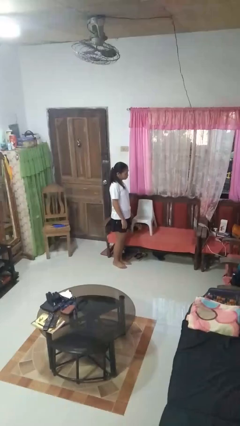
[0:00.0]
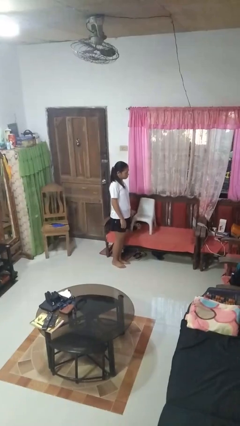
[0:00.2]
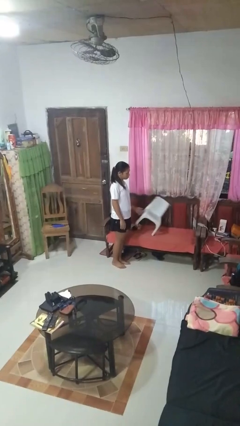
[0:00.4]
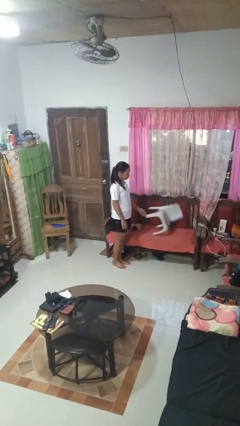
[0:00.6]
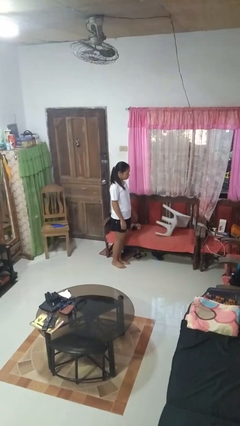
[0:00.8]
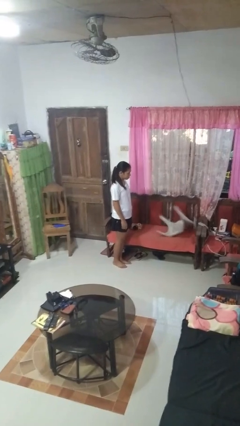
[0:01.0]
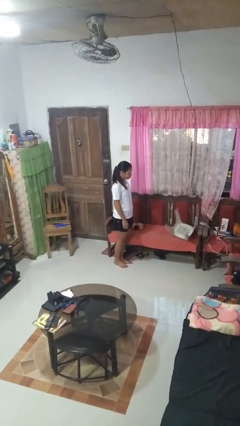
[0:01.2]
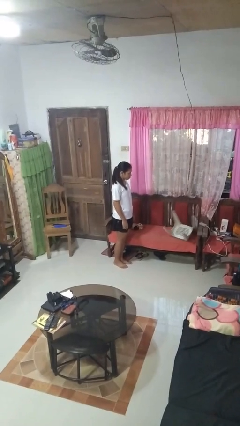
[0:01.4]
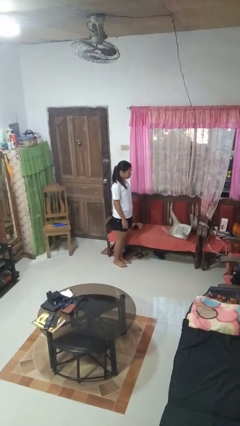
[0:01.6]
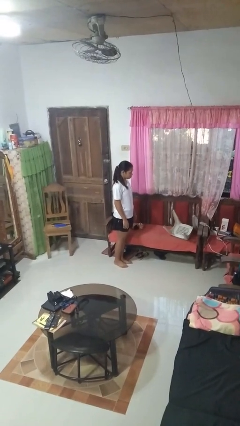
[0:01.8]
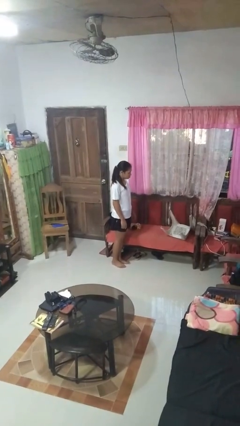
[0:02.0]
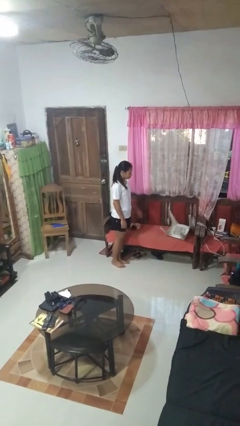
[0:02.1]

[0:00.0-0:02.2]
person knocks over furniture

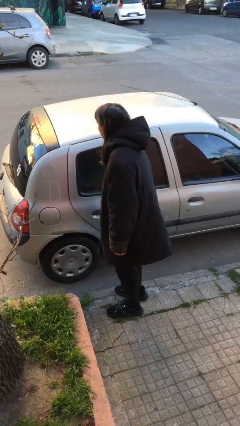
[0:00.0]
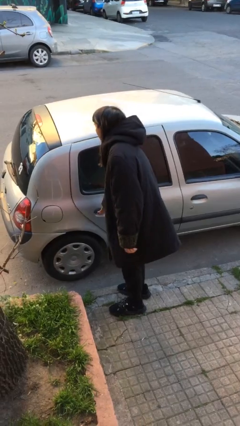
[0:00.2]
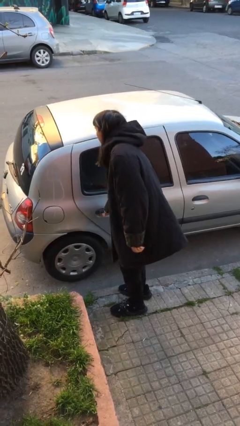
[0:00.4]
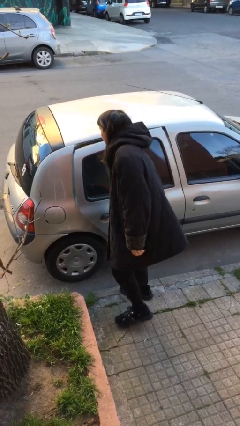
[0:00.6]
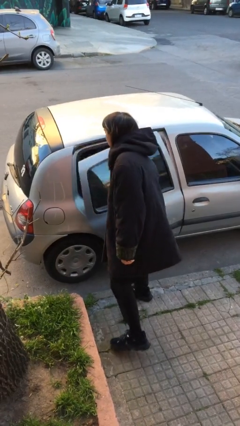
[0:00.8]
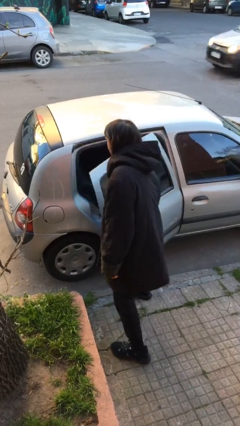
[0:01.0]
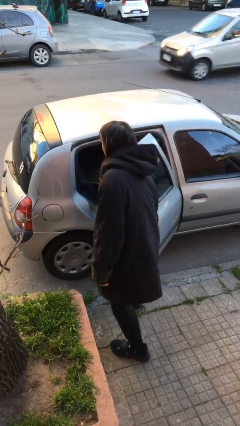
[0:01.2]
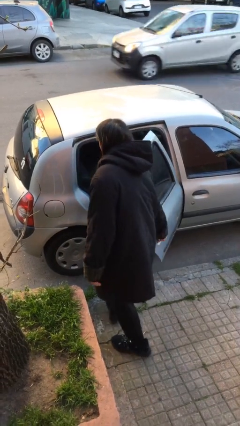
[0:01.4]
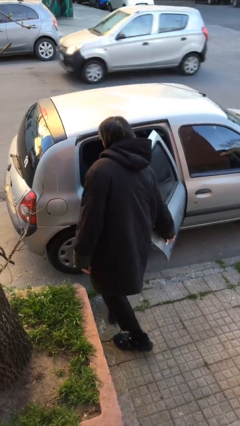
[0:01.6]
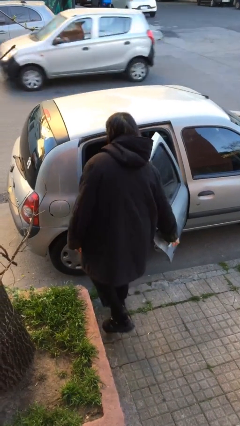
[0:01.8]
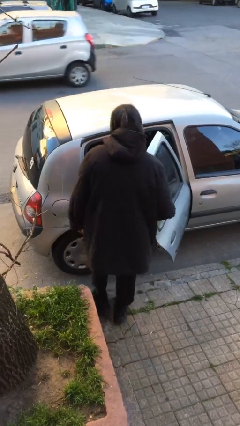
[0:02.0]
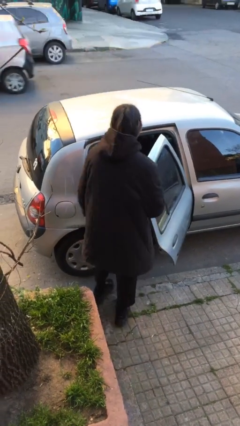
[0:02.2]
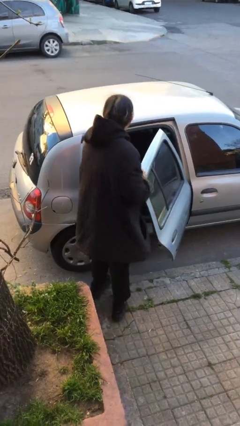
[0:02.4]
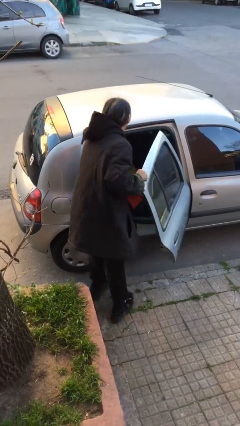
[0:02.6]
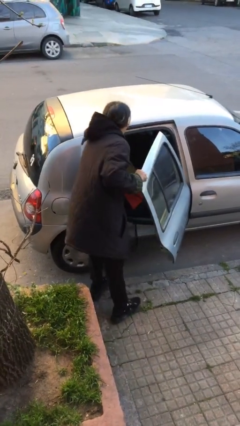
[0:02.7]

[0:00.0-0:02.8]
person opens car door

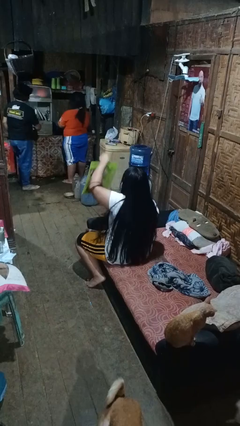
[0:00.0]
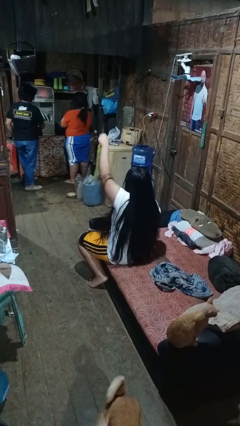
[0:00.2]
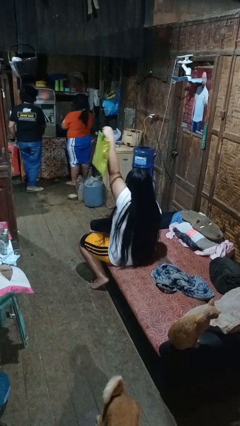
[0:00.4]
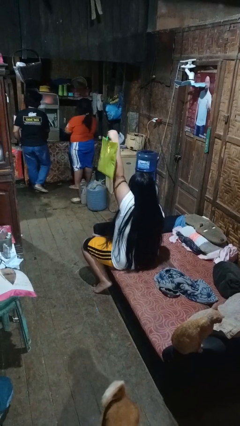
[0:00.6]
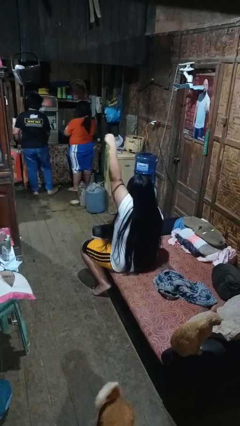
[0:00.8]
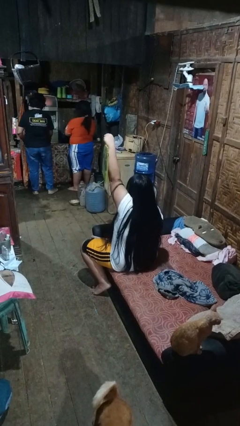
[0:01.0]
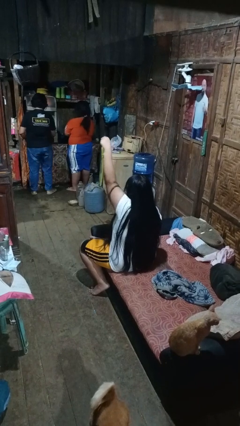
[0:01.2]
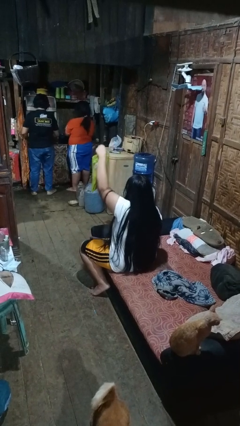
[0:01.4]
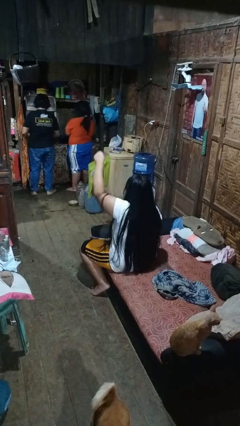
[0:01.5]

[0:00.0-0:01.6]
person holds object above head

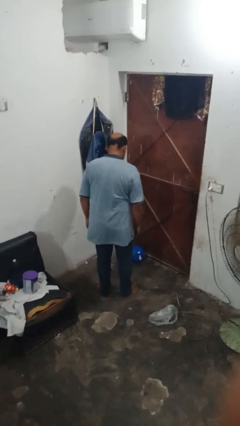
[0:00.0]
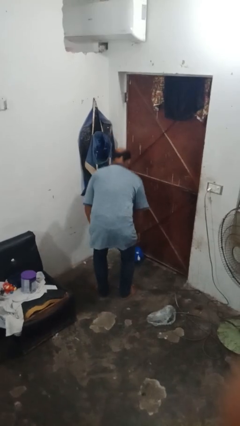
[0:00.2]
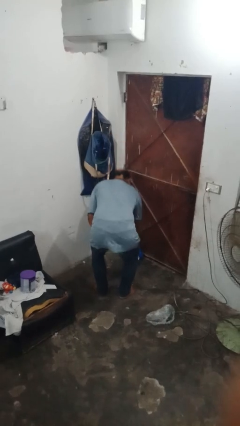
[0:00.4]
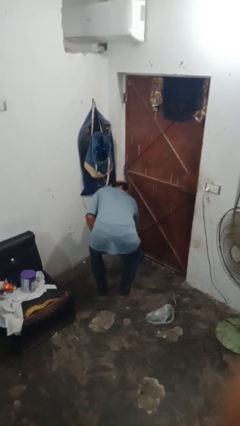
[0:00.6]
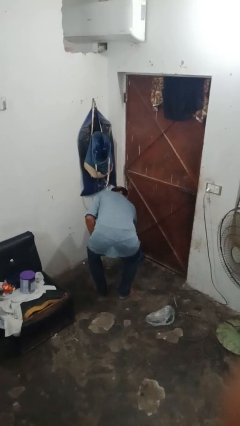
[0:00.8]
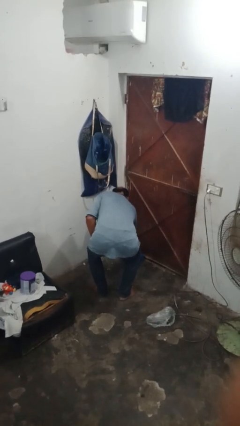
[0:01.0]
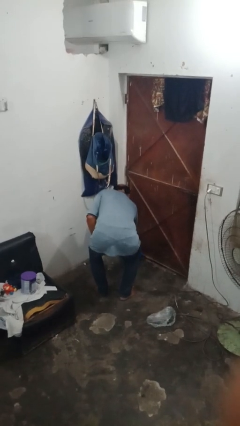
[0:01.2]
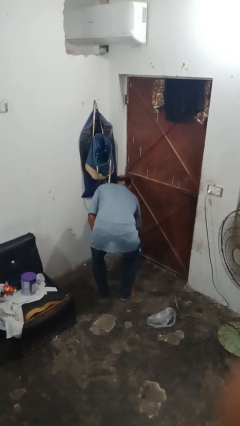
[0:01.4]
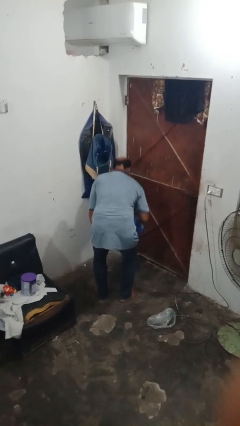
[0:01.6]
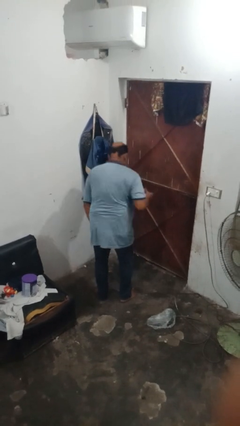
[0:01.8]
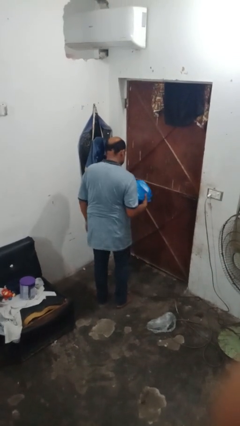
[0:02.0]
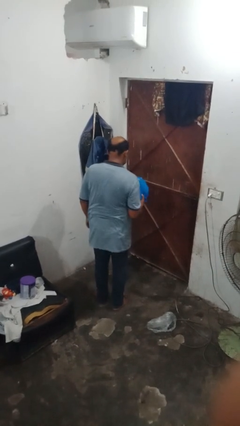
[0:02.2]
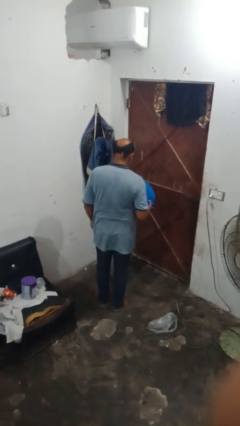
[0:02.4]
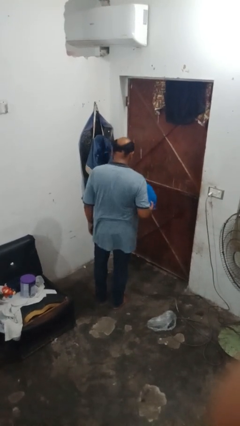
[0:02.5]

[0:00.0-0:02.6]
person stands up from floor

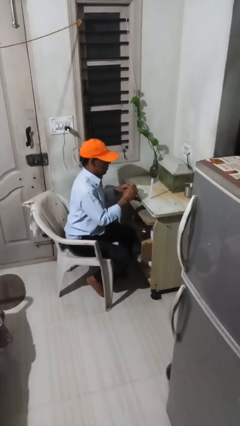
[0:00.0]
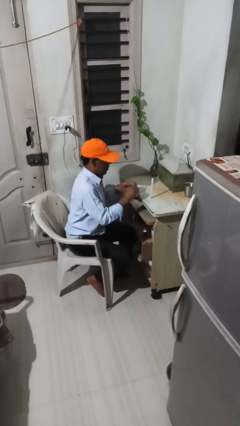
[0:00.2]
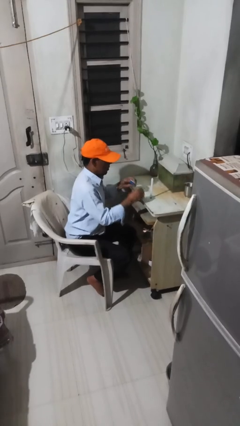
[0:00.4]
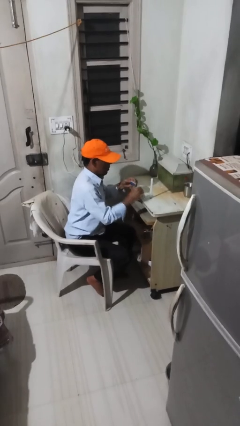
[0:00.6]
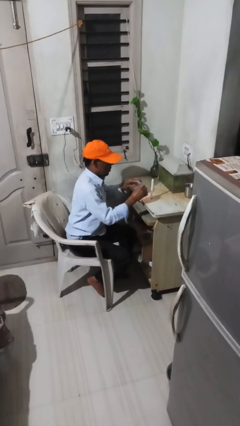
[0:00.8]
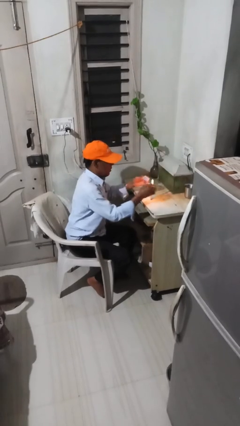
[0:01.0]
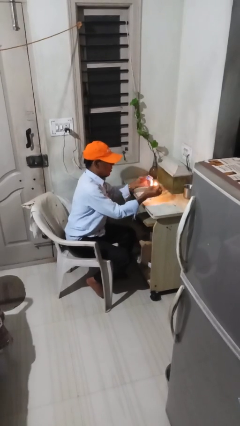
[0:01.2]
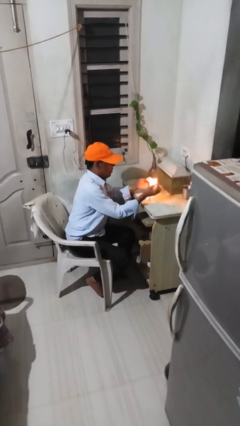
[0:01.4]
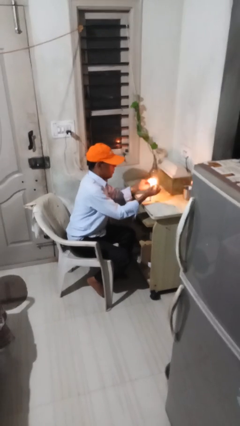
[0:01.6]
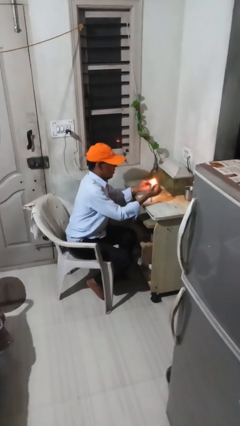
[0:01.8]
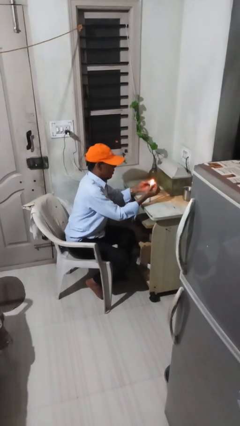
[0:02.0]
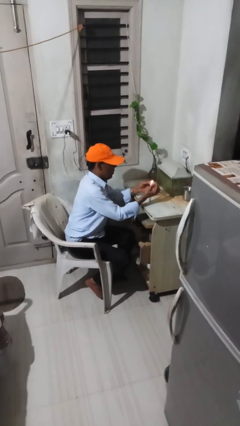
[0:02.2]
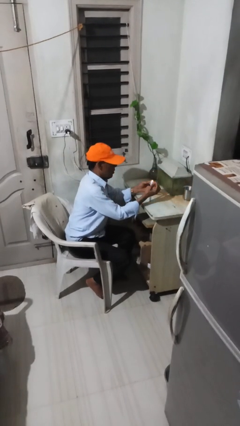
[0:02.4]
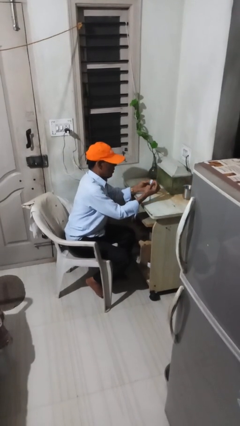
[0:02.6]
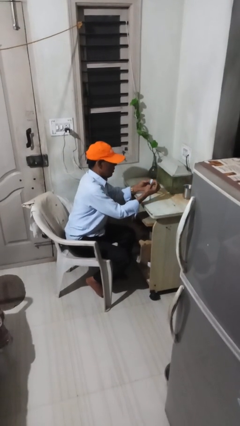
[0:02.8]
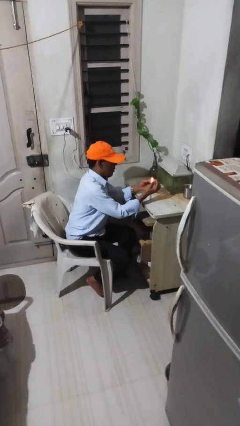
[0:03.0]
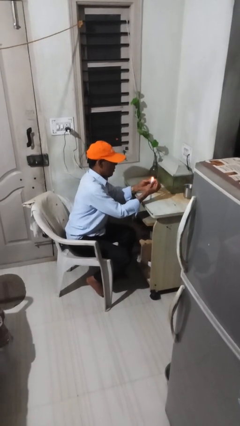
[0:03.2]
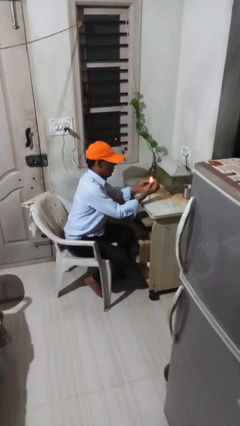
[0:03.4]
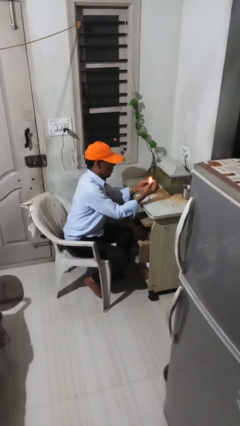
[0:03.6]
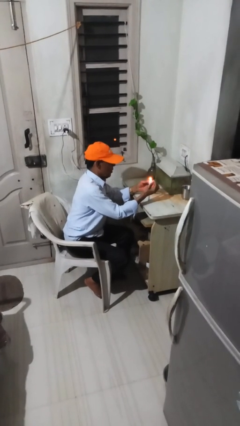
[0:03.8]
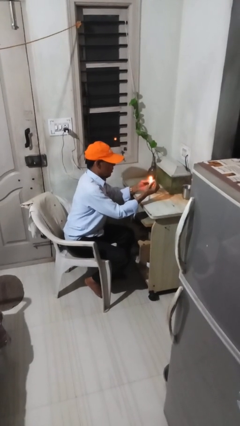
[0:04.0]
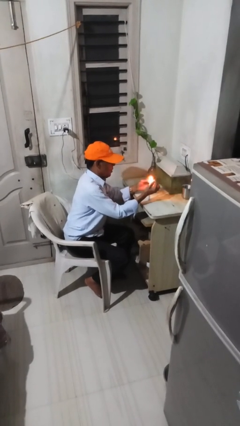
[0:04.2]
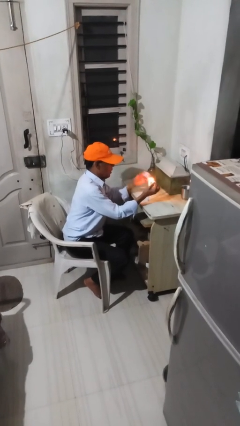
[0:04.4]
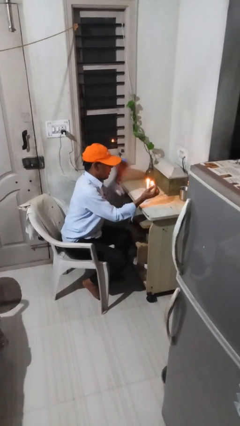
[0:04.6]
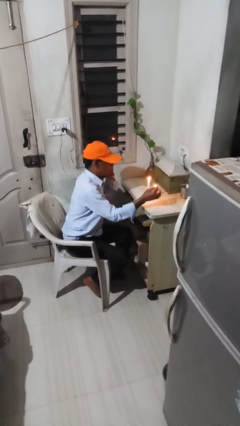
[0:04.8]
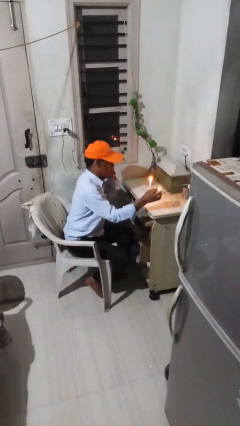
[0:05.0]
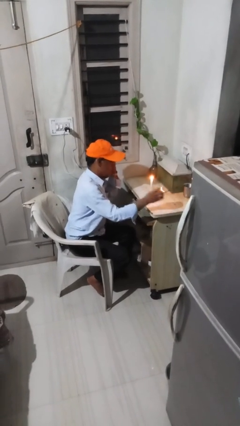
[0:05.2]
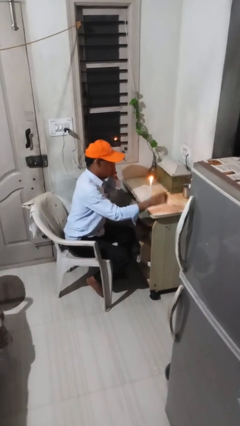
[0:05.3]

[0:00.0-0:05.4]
person lights candle

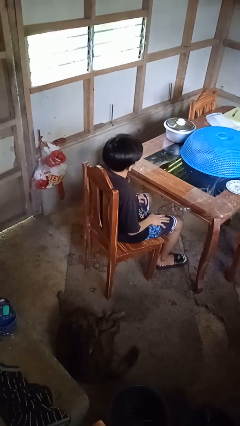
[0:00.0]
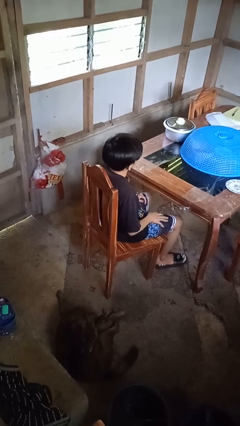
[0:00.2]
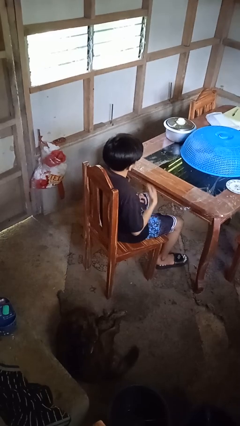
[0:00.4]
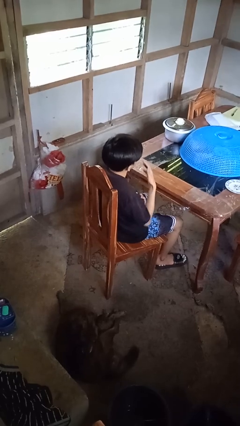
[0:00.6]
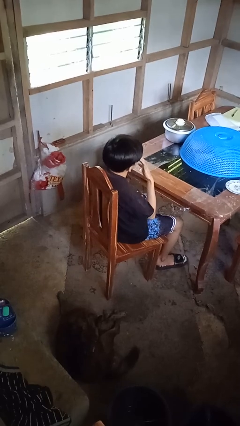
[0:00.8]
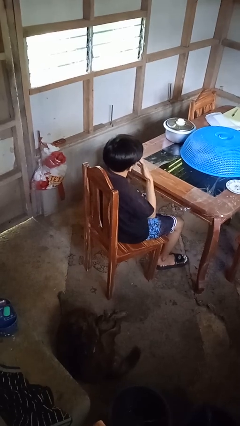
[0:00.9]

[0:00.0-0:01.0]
person licks fingers

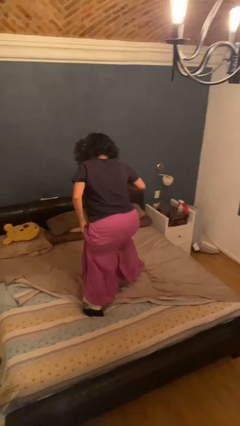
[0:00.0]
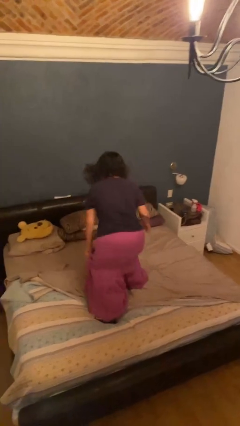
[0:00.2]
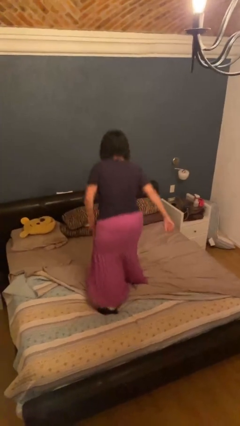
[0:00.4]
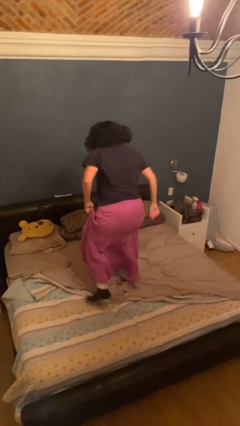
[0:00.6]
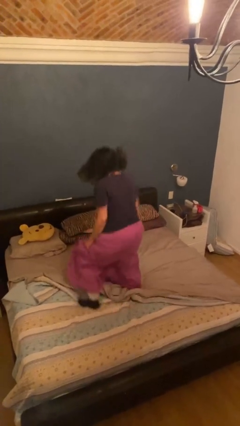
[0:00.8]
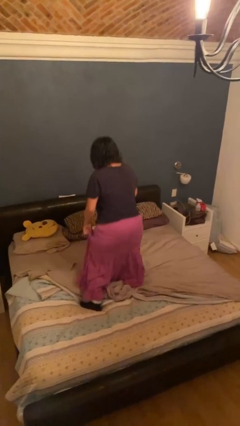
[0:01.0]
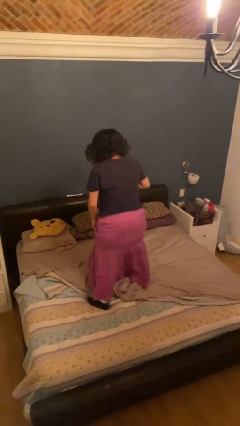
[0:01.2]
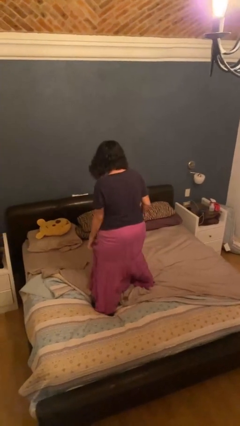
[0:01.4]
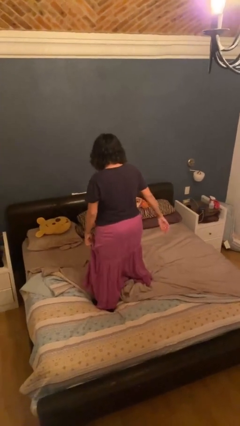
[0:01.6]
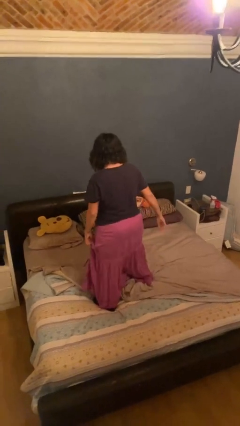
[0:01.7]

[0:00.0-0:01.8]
person jumps on bed
